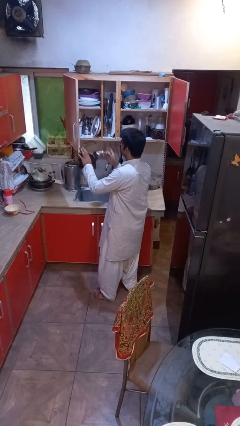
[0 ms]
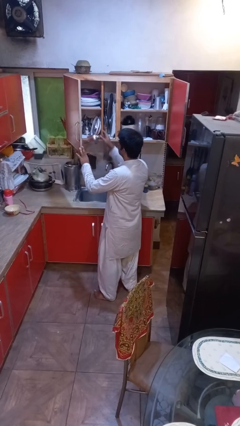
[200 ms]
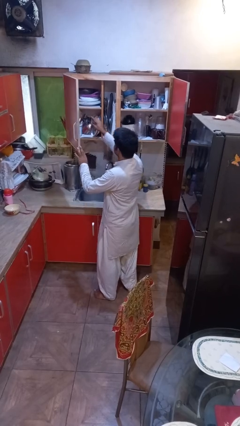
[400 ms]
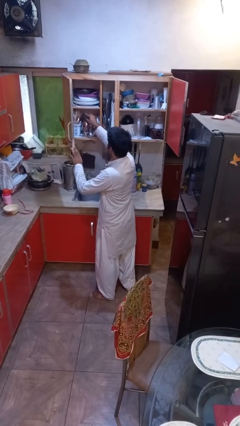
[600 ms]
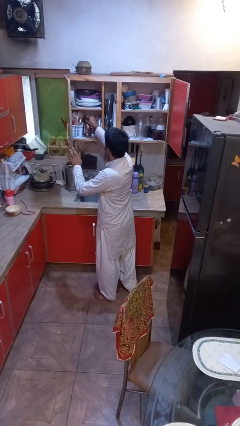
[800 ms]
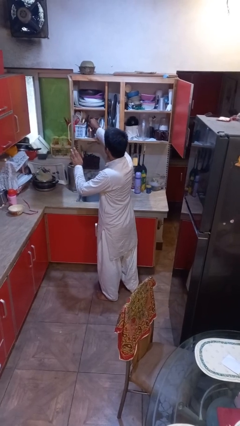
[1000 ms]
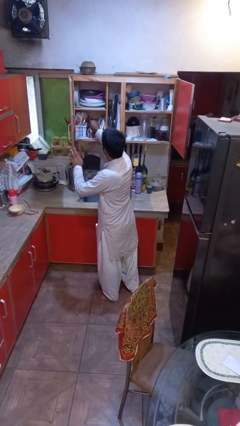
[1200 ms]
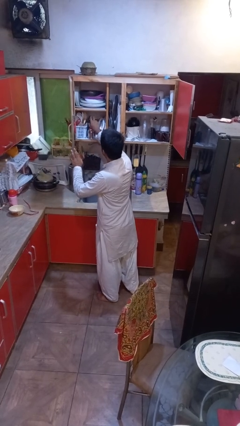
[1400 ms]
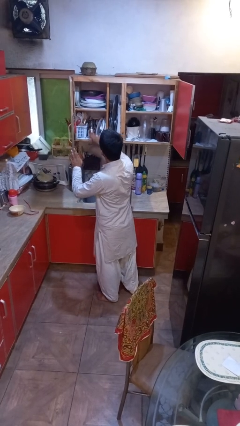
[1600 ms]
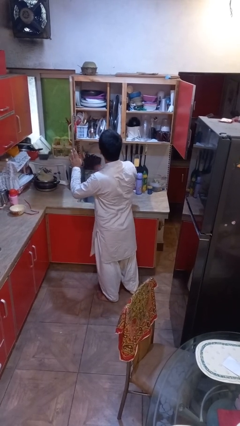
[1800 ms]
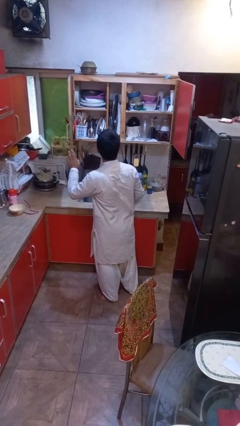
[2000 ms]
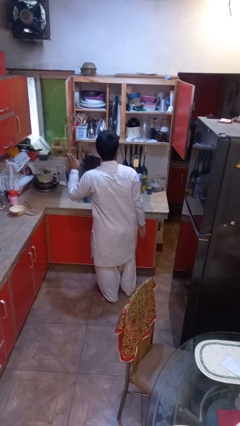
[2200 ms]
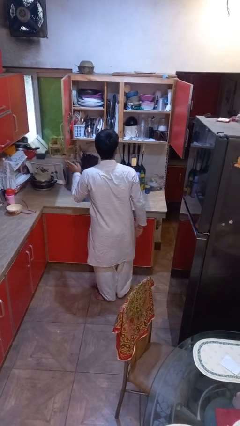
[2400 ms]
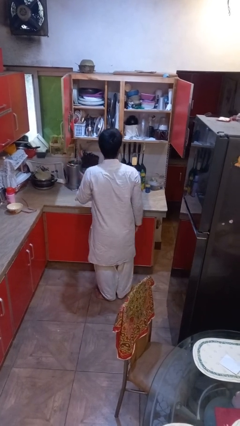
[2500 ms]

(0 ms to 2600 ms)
person puts down object into cabinet

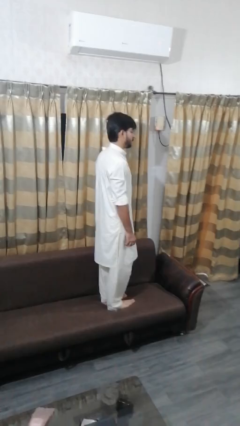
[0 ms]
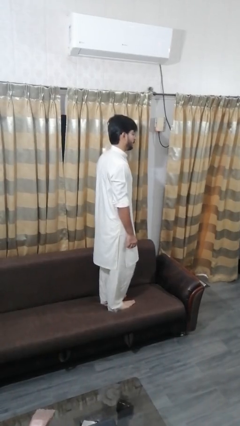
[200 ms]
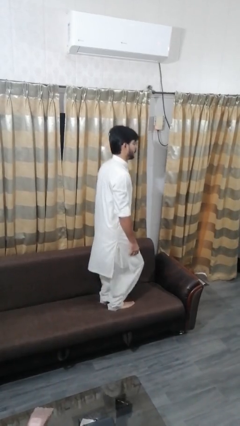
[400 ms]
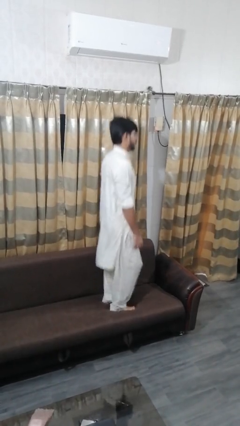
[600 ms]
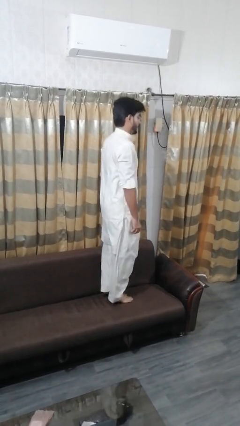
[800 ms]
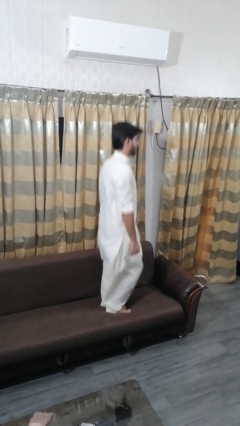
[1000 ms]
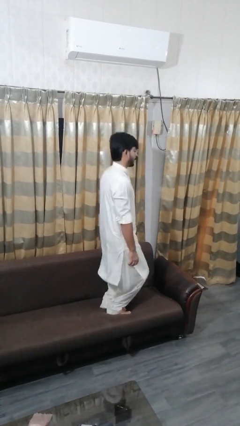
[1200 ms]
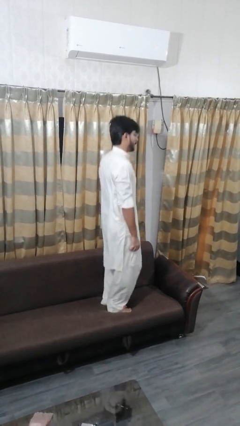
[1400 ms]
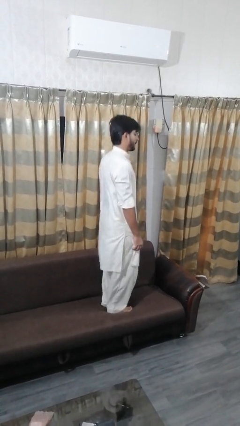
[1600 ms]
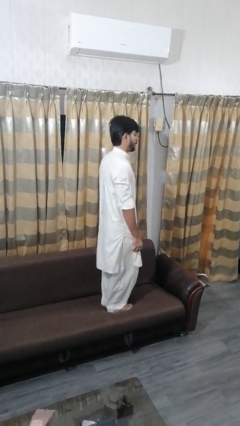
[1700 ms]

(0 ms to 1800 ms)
person jumps on couch

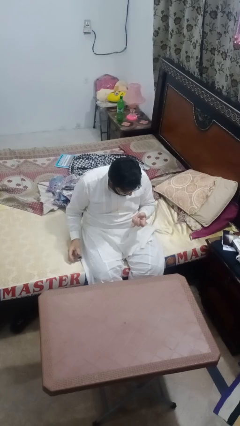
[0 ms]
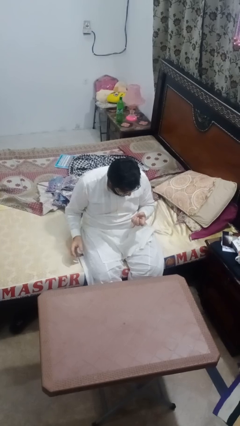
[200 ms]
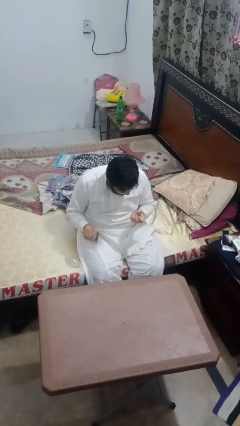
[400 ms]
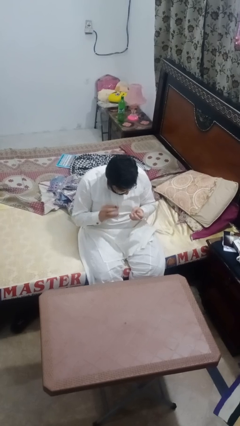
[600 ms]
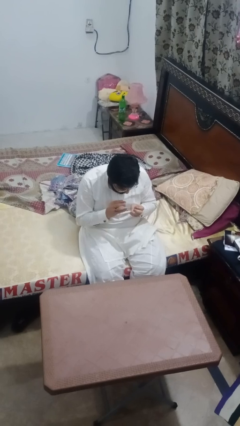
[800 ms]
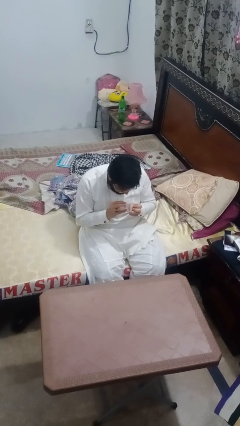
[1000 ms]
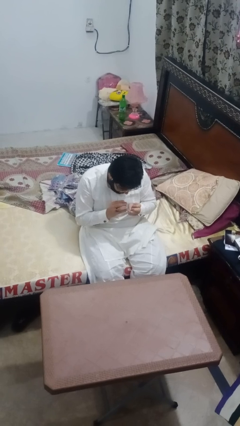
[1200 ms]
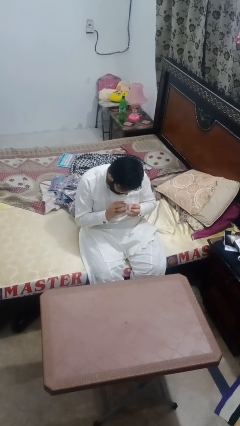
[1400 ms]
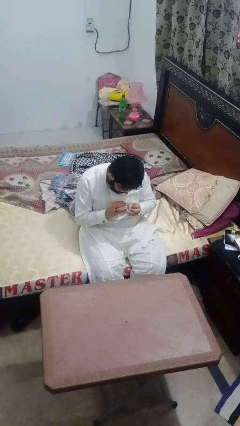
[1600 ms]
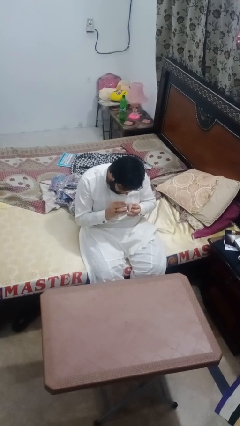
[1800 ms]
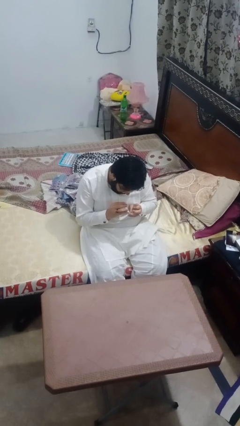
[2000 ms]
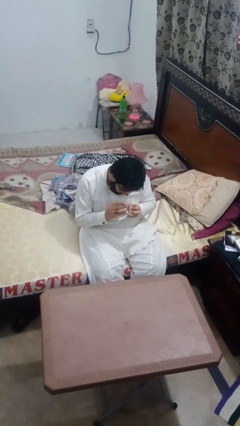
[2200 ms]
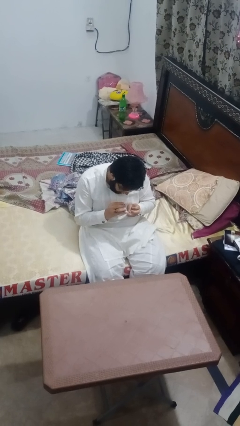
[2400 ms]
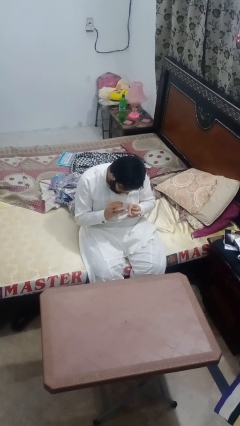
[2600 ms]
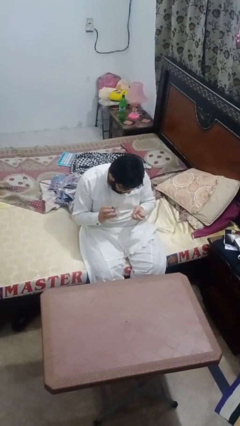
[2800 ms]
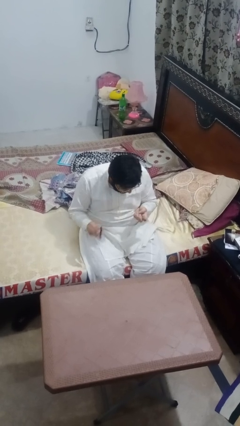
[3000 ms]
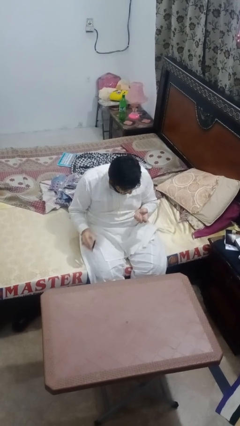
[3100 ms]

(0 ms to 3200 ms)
person clips fingernails

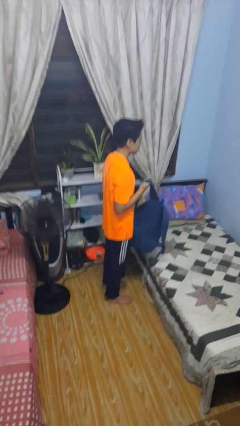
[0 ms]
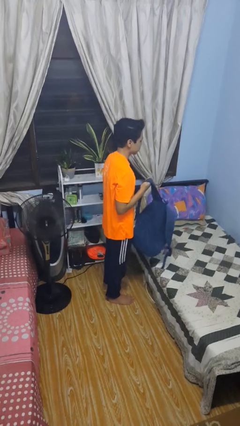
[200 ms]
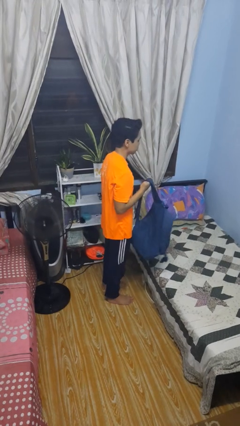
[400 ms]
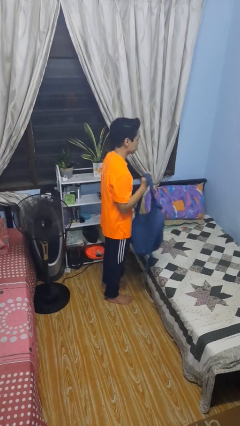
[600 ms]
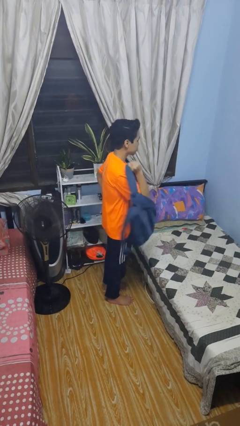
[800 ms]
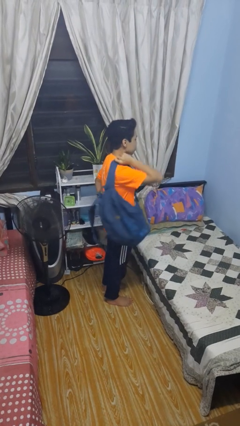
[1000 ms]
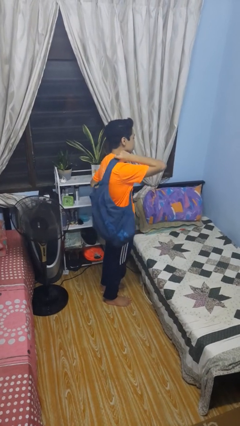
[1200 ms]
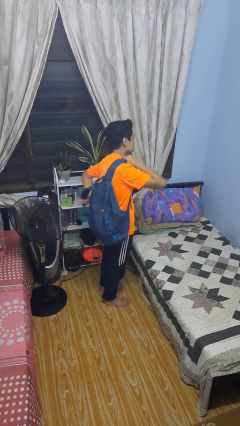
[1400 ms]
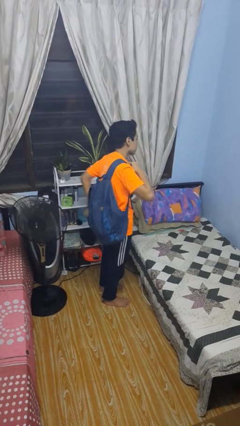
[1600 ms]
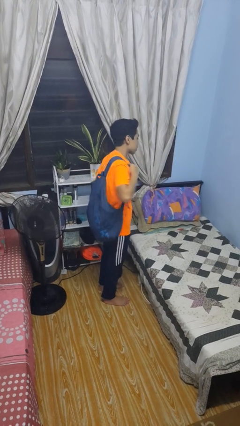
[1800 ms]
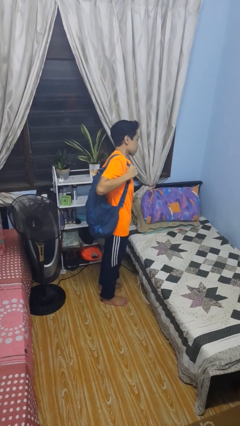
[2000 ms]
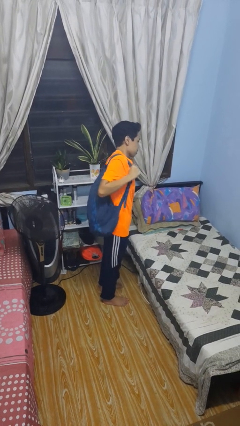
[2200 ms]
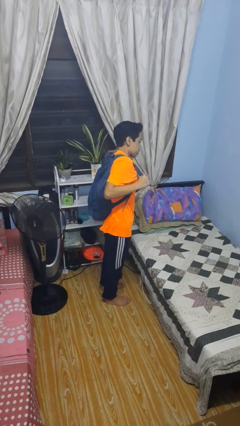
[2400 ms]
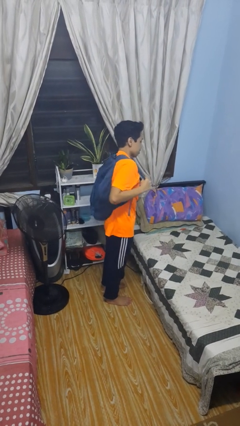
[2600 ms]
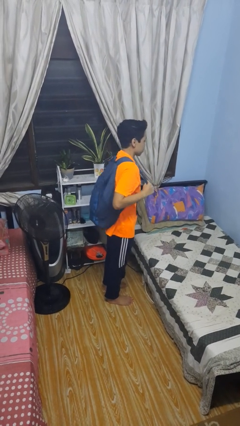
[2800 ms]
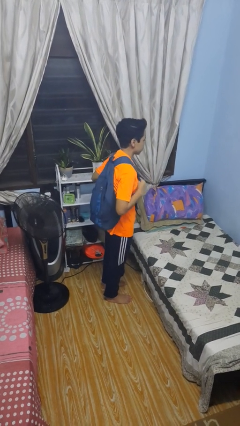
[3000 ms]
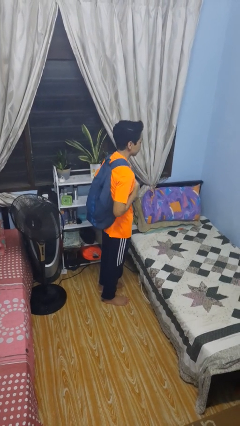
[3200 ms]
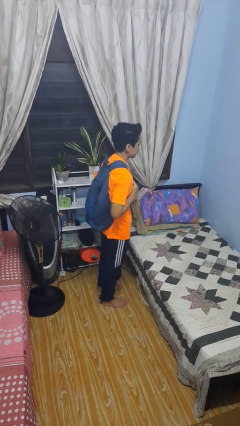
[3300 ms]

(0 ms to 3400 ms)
person puts on backpack

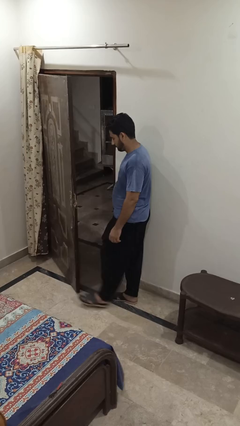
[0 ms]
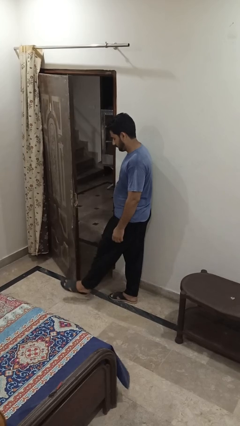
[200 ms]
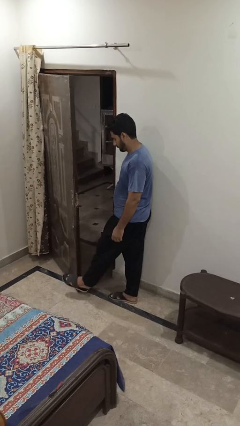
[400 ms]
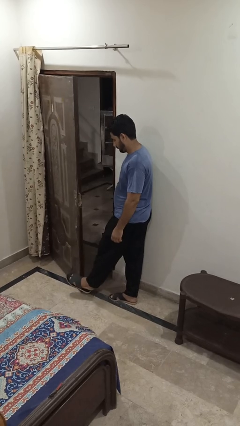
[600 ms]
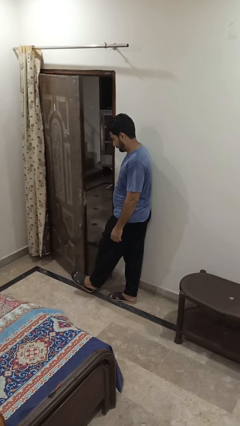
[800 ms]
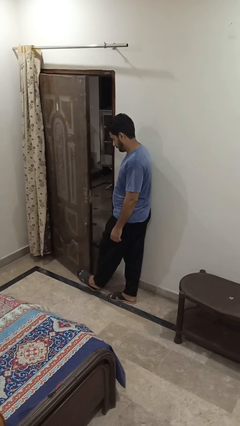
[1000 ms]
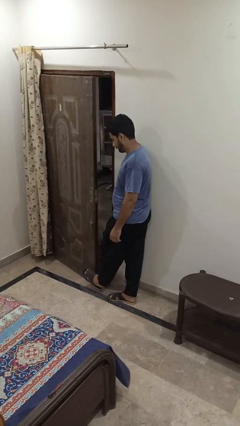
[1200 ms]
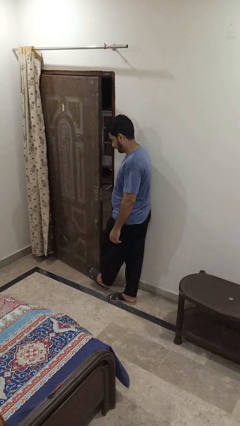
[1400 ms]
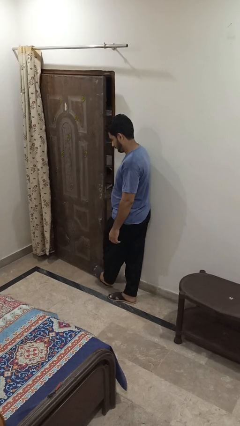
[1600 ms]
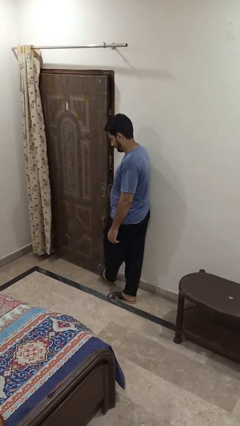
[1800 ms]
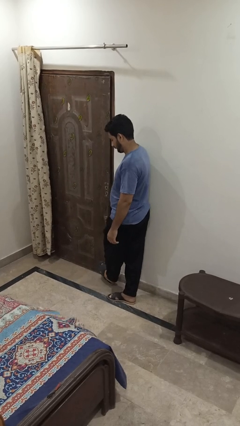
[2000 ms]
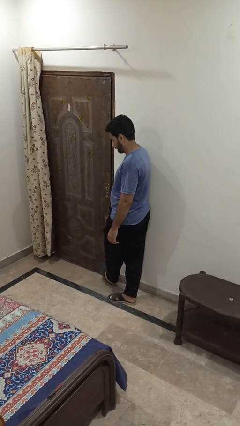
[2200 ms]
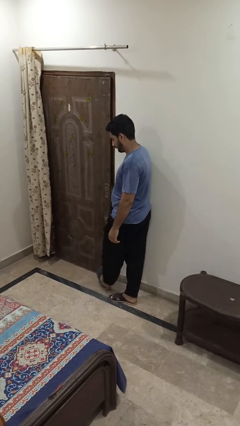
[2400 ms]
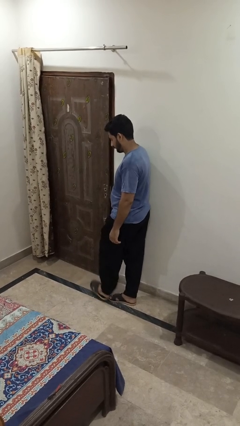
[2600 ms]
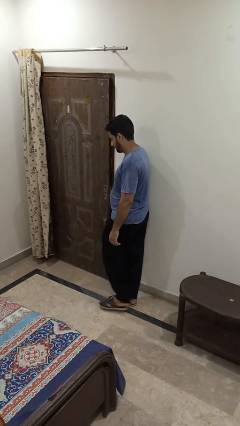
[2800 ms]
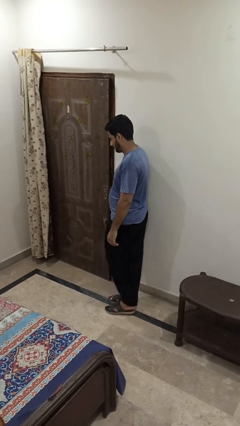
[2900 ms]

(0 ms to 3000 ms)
person closes door with foot

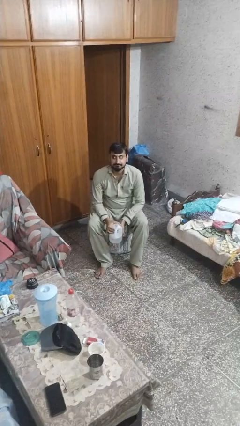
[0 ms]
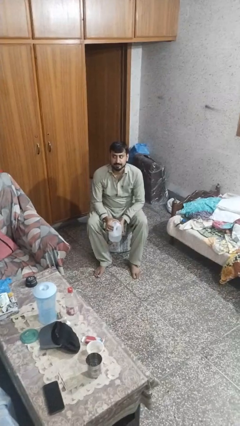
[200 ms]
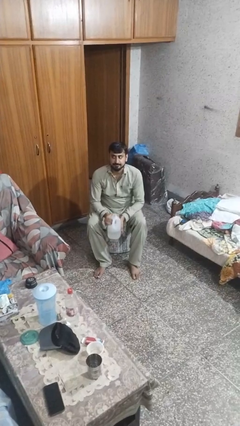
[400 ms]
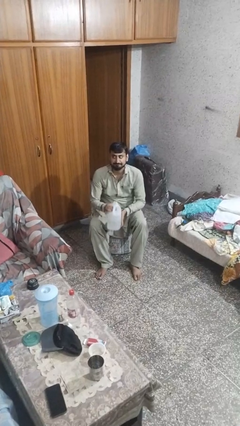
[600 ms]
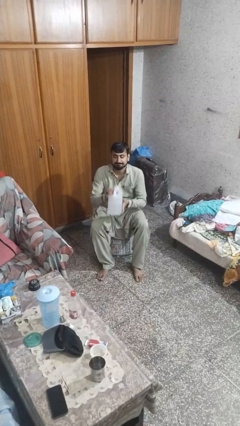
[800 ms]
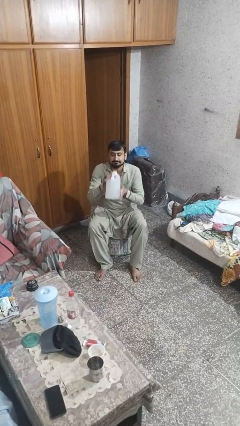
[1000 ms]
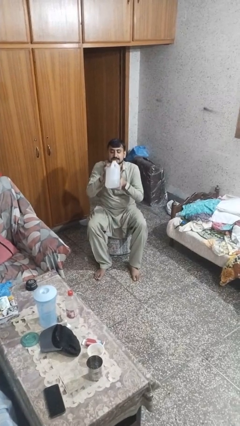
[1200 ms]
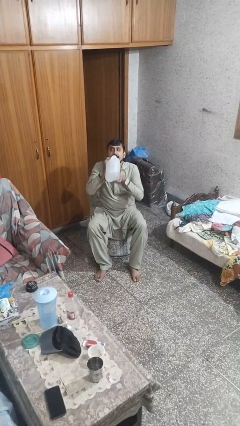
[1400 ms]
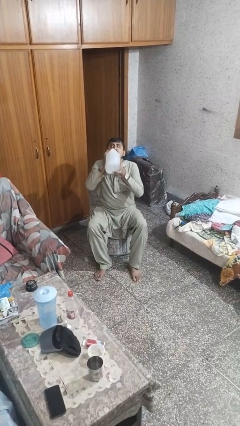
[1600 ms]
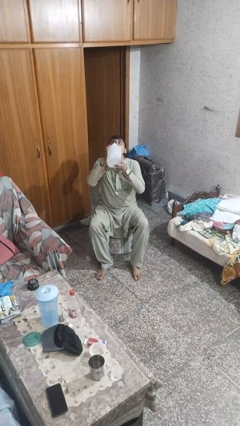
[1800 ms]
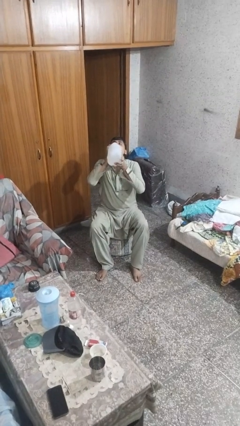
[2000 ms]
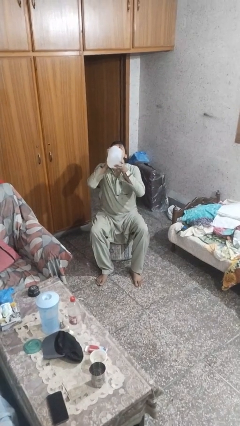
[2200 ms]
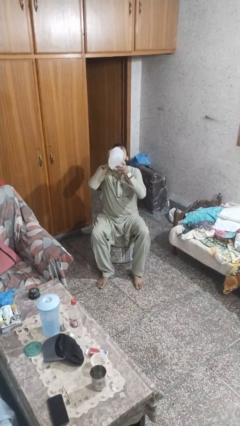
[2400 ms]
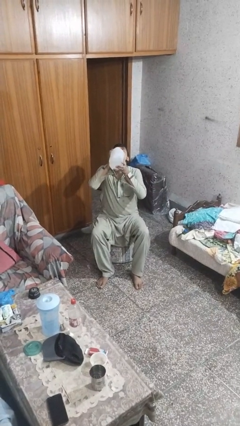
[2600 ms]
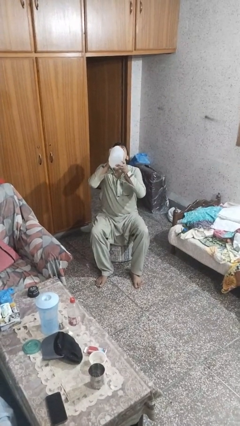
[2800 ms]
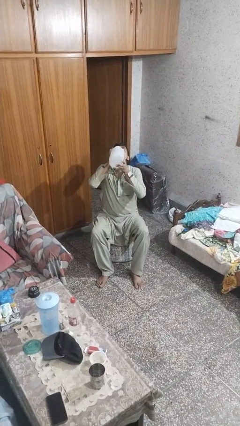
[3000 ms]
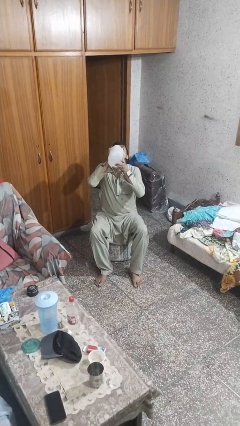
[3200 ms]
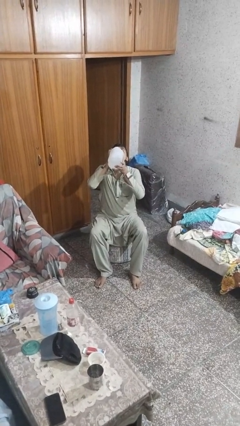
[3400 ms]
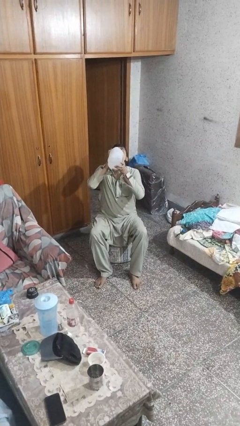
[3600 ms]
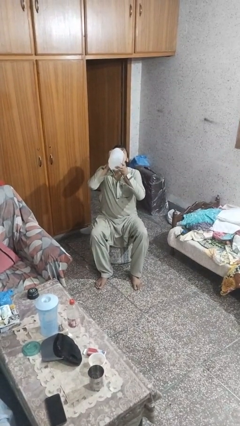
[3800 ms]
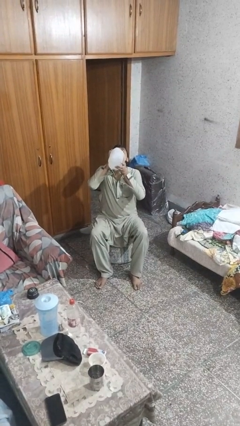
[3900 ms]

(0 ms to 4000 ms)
person drinks from bottle
